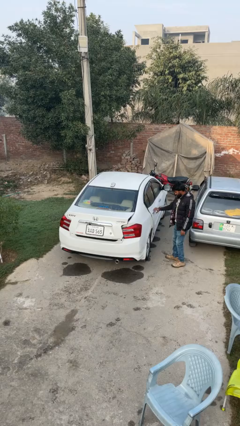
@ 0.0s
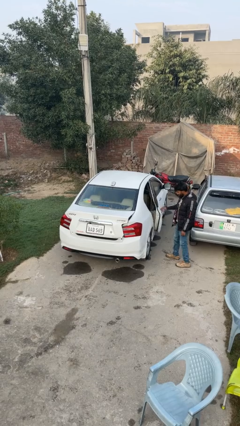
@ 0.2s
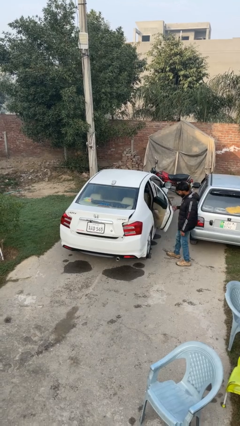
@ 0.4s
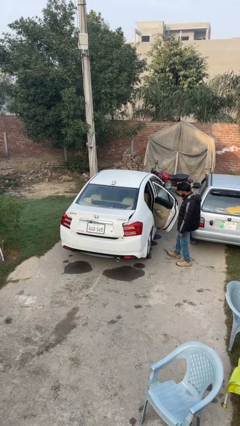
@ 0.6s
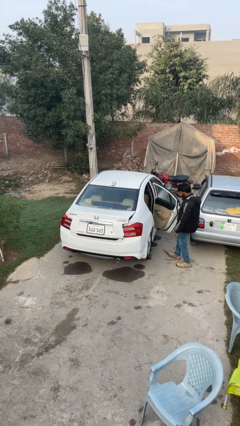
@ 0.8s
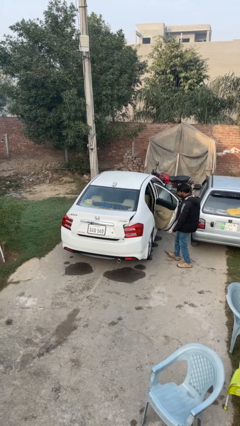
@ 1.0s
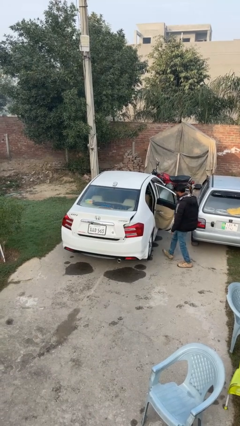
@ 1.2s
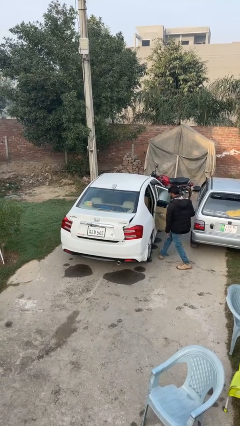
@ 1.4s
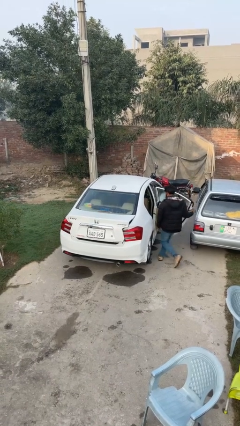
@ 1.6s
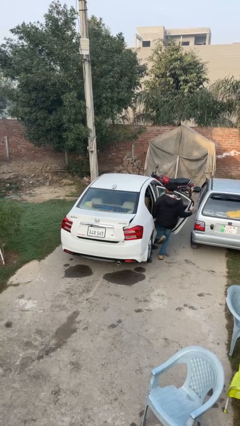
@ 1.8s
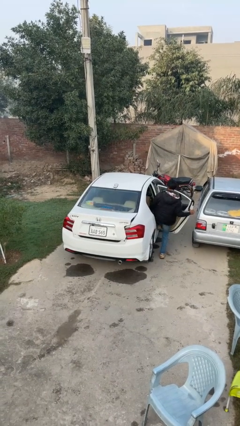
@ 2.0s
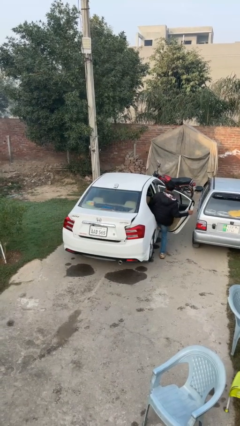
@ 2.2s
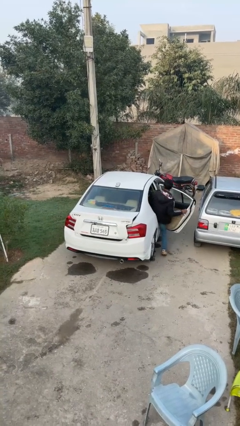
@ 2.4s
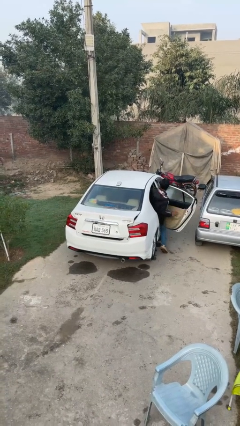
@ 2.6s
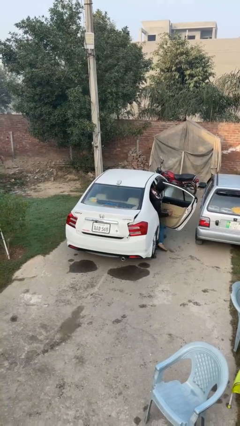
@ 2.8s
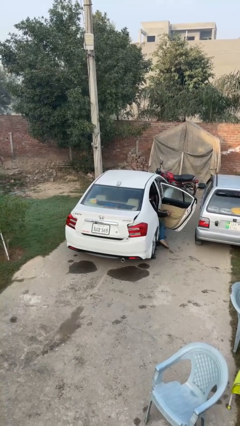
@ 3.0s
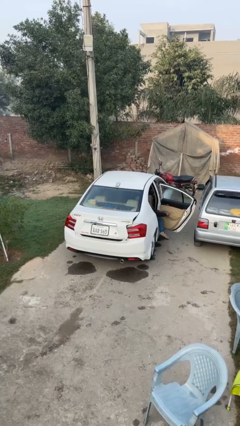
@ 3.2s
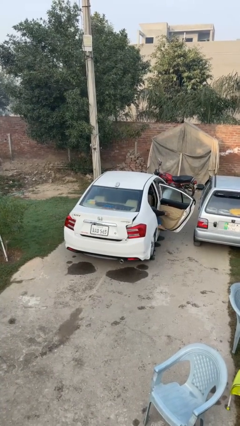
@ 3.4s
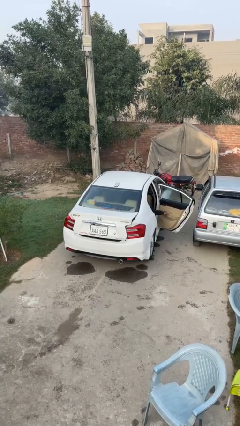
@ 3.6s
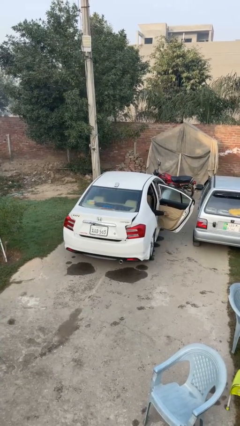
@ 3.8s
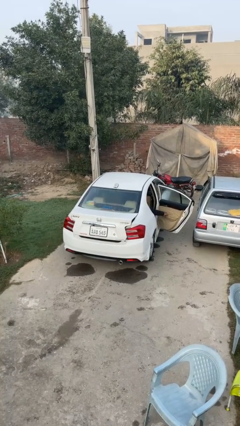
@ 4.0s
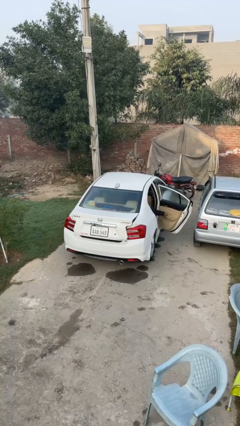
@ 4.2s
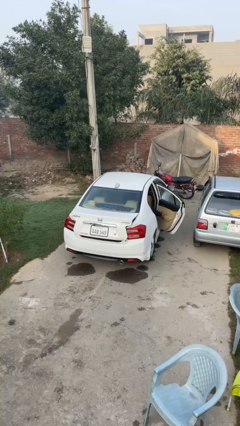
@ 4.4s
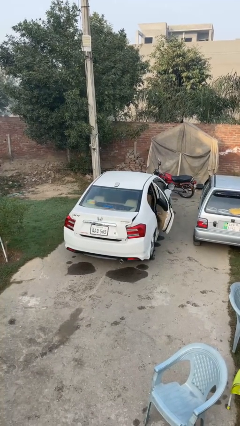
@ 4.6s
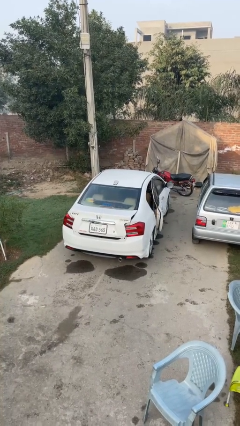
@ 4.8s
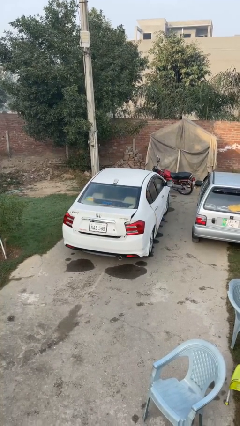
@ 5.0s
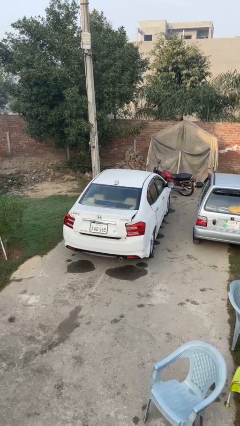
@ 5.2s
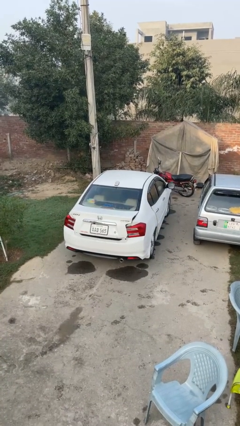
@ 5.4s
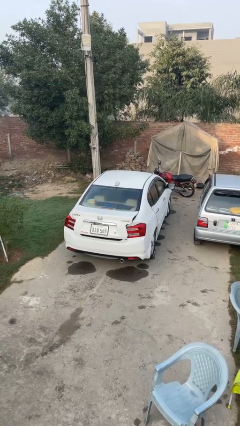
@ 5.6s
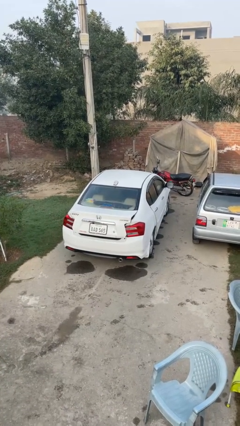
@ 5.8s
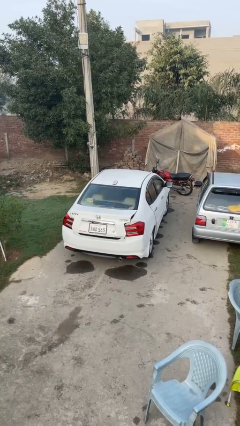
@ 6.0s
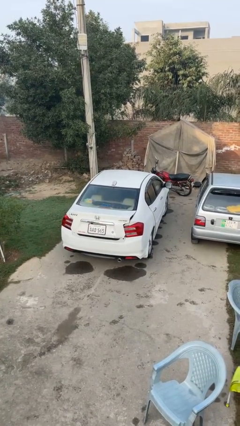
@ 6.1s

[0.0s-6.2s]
car picks up person

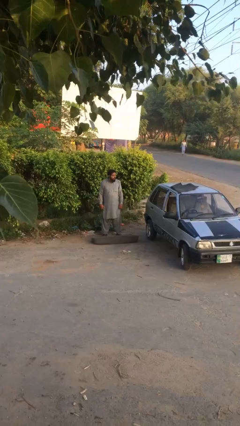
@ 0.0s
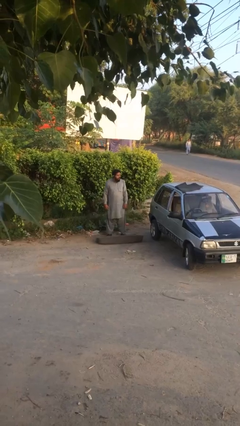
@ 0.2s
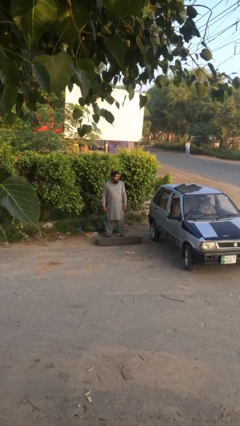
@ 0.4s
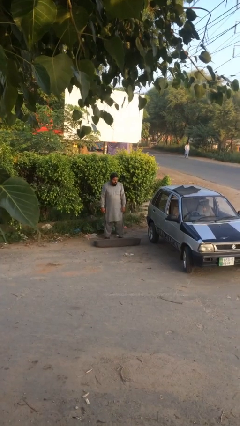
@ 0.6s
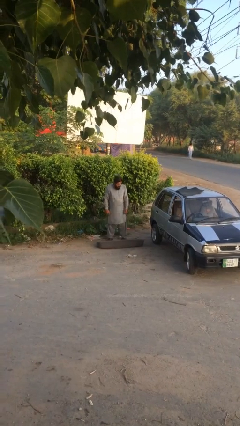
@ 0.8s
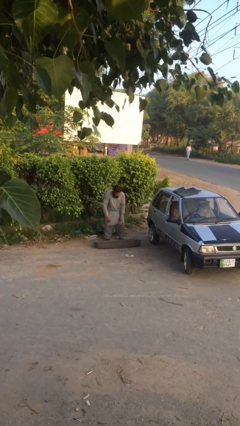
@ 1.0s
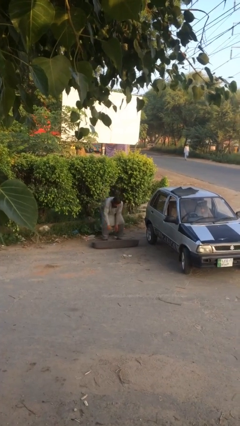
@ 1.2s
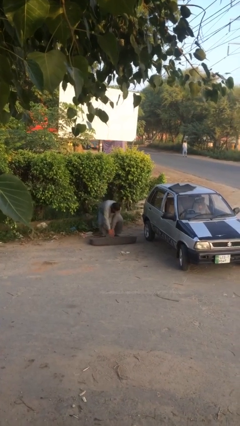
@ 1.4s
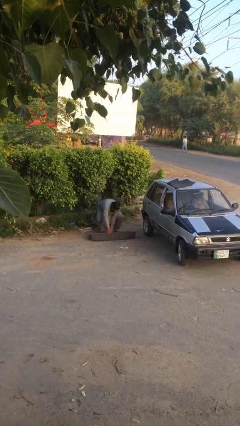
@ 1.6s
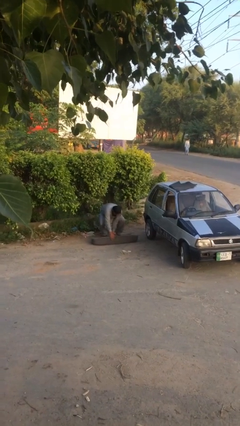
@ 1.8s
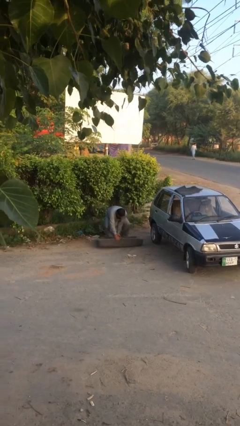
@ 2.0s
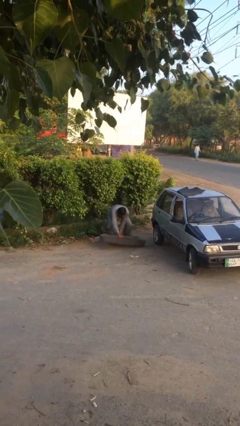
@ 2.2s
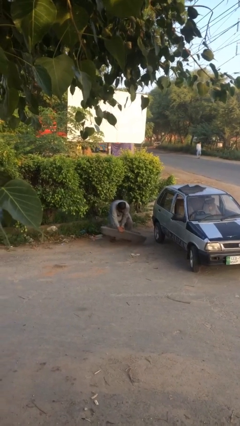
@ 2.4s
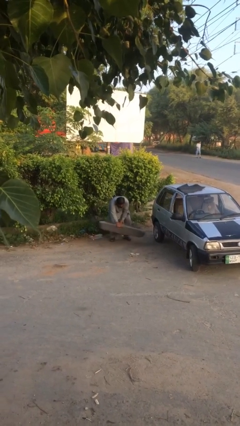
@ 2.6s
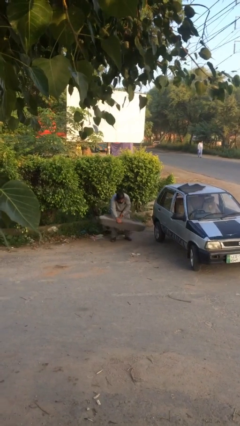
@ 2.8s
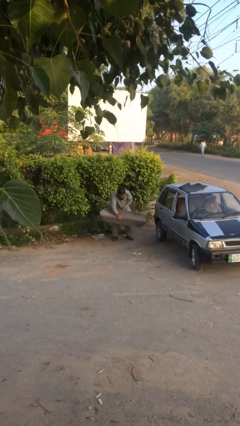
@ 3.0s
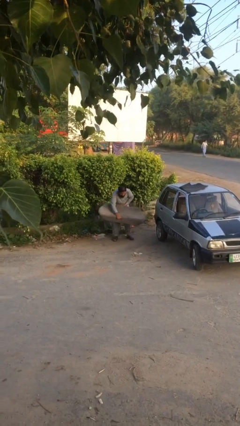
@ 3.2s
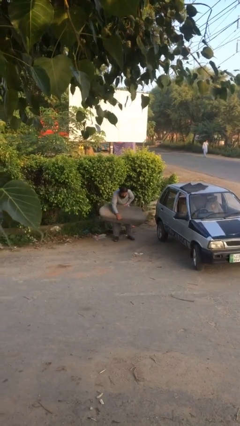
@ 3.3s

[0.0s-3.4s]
person picks up object from floor

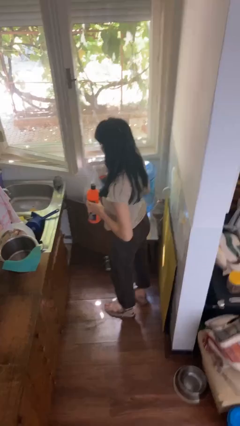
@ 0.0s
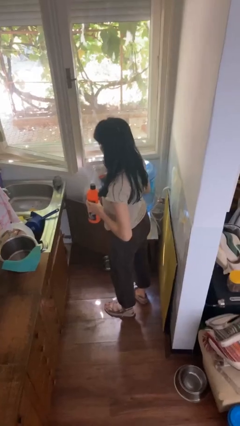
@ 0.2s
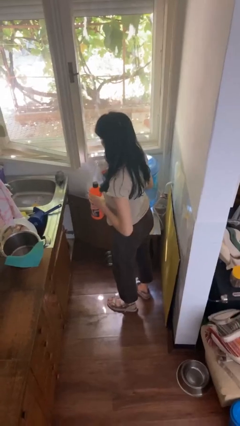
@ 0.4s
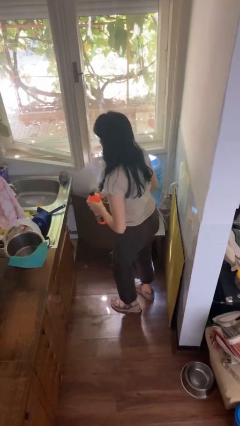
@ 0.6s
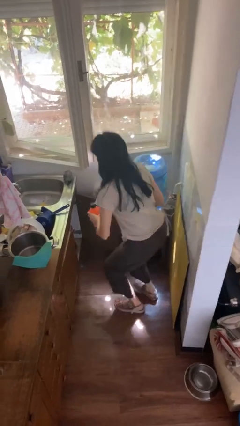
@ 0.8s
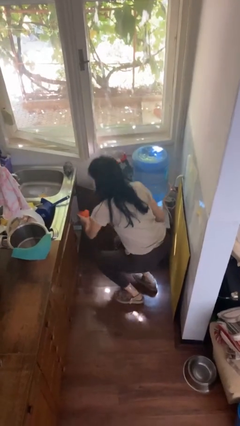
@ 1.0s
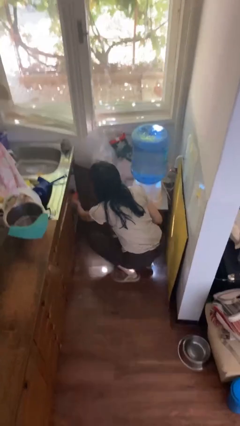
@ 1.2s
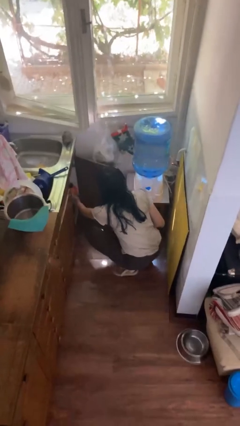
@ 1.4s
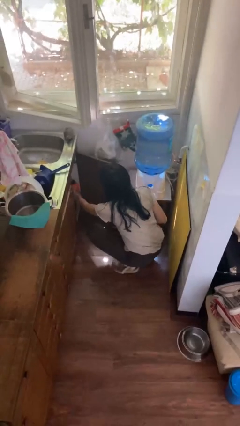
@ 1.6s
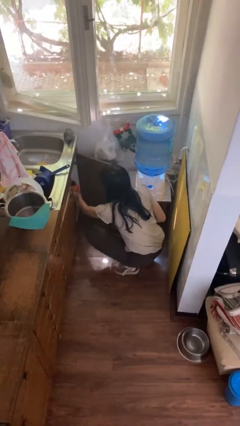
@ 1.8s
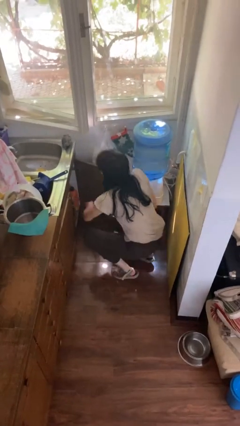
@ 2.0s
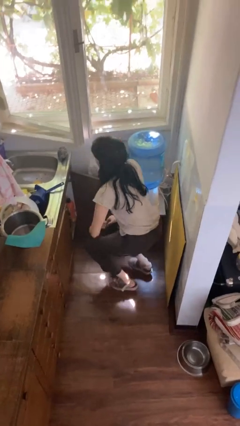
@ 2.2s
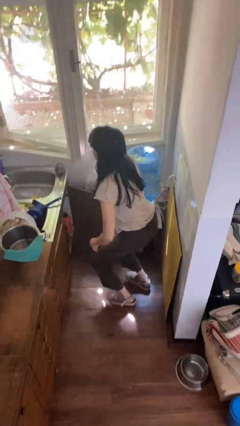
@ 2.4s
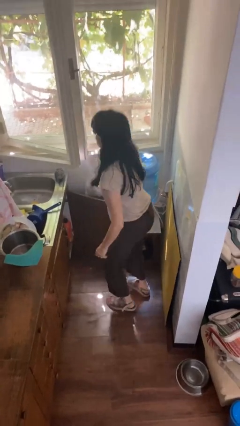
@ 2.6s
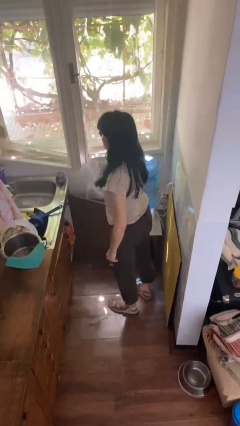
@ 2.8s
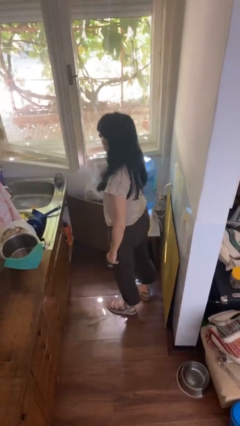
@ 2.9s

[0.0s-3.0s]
person puts down object into cabinet

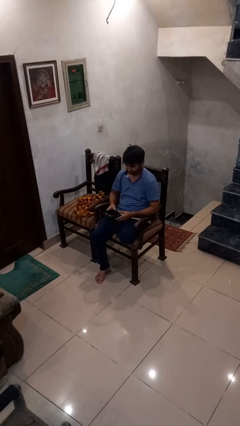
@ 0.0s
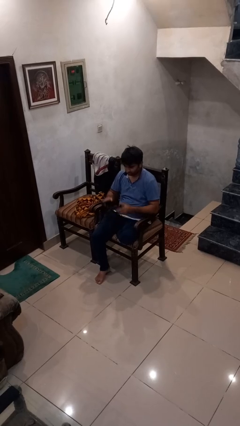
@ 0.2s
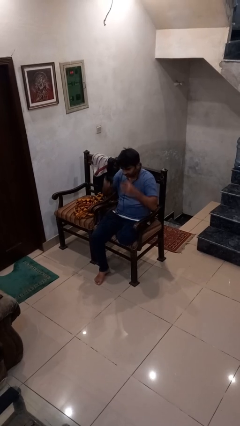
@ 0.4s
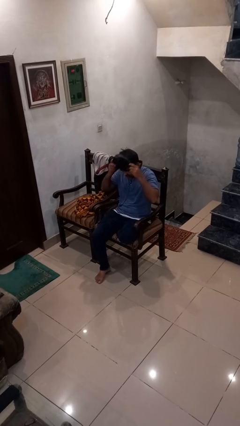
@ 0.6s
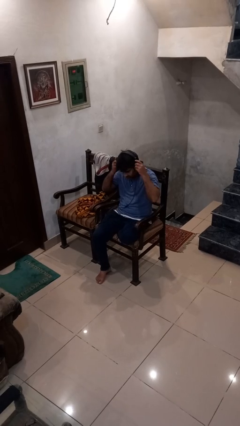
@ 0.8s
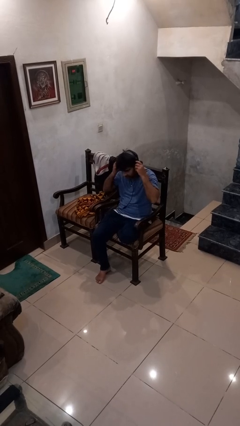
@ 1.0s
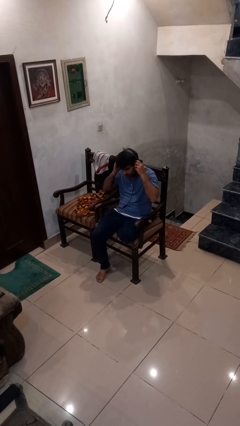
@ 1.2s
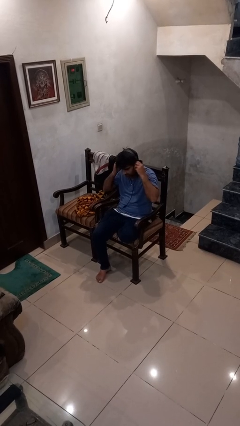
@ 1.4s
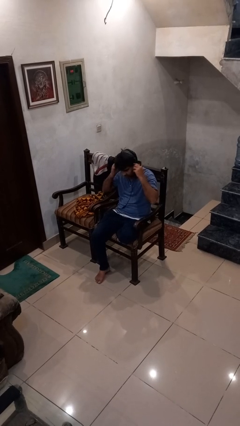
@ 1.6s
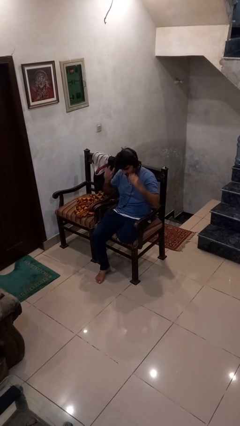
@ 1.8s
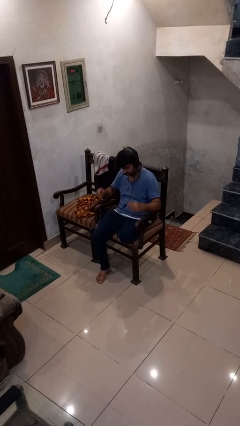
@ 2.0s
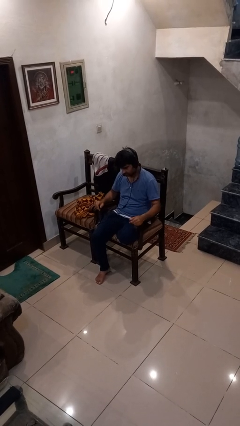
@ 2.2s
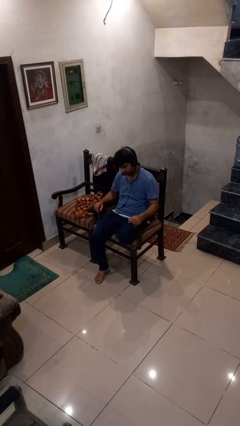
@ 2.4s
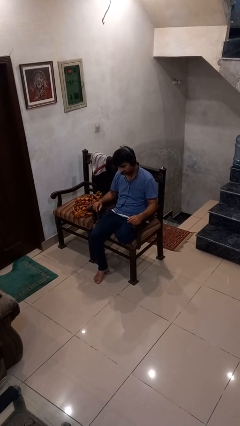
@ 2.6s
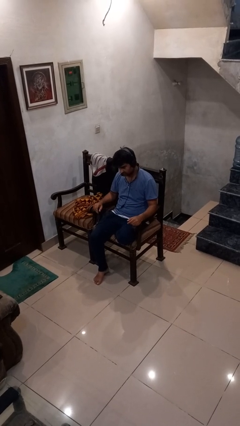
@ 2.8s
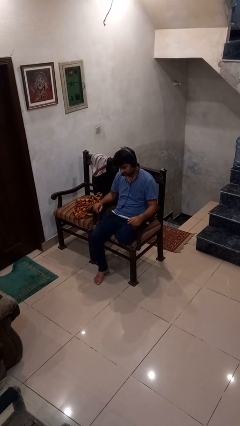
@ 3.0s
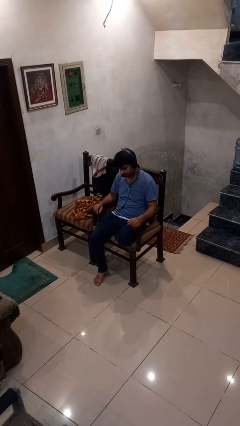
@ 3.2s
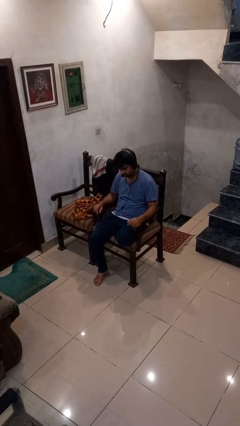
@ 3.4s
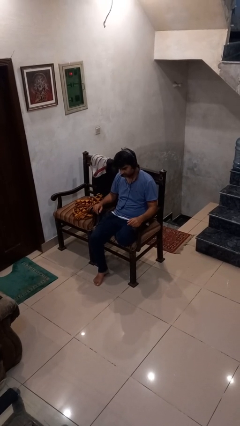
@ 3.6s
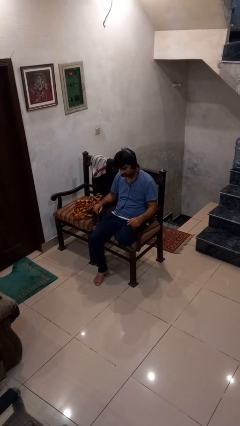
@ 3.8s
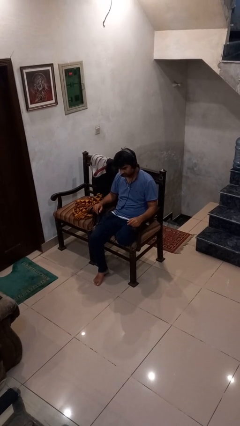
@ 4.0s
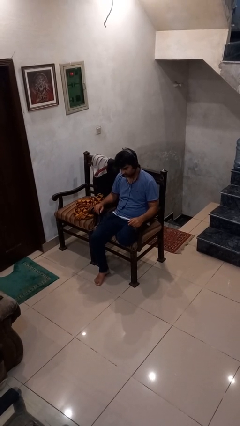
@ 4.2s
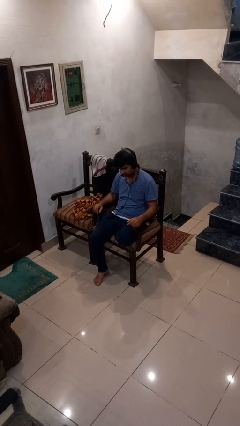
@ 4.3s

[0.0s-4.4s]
person puts on headphones

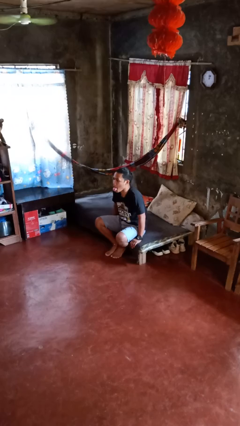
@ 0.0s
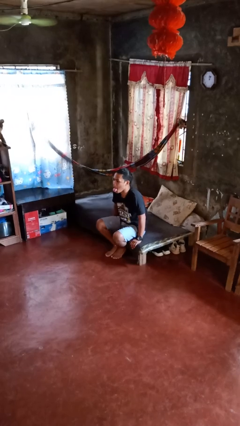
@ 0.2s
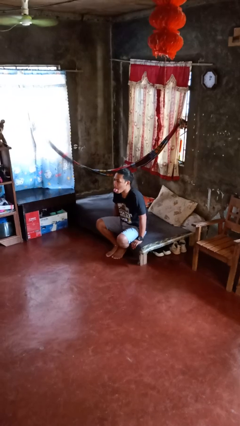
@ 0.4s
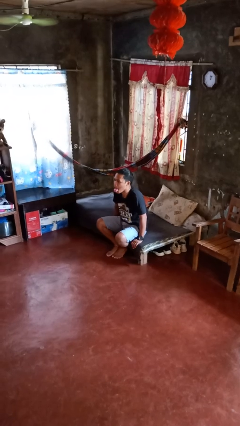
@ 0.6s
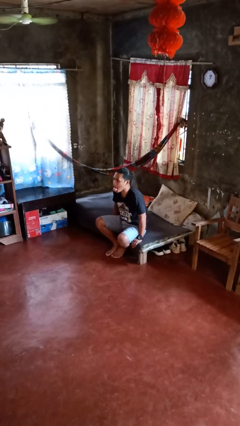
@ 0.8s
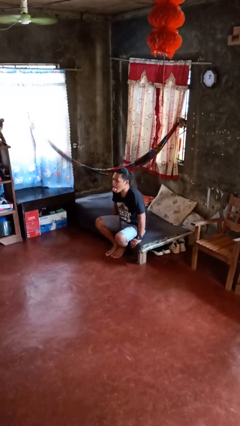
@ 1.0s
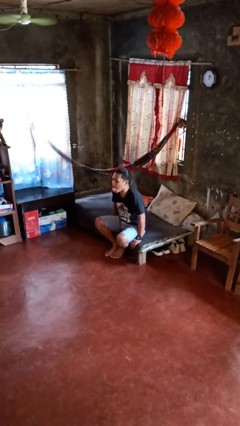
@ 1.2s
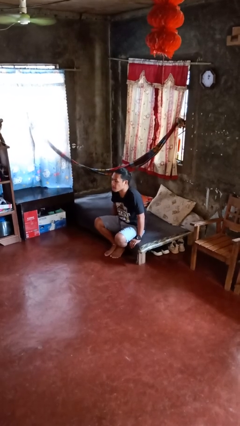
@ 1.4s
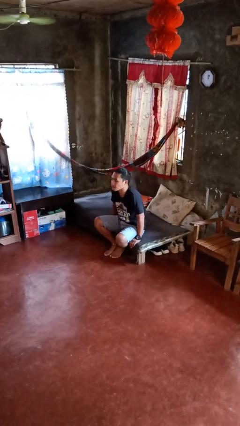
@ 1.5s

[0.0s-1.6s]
person sticks out tongue
